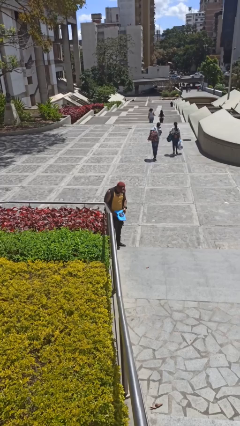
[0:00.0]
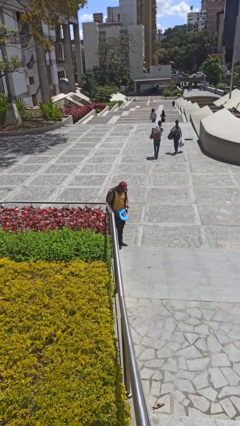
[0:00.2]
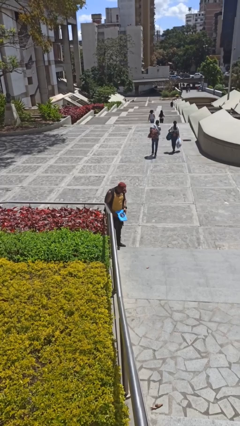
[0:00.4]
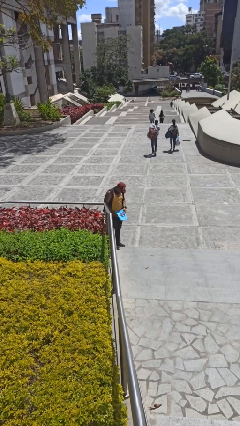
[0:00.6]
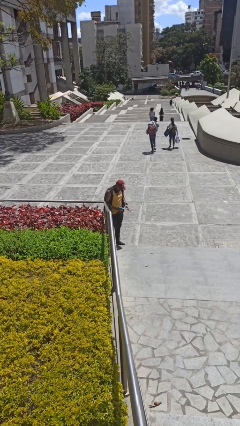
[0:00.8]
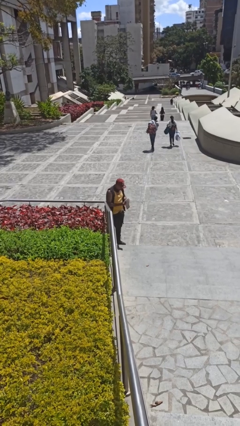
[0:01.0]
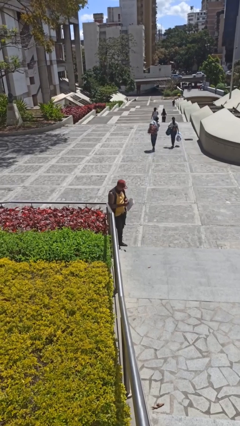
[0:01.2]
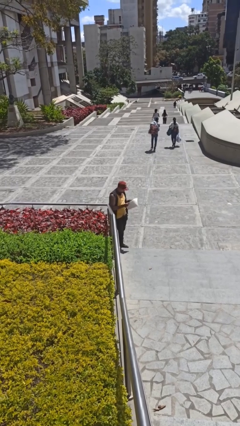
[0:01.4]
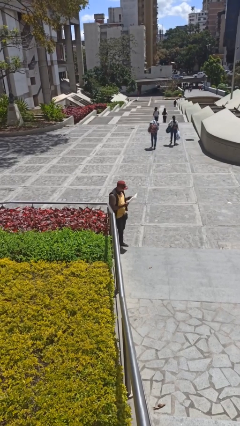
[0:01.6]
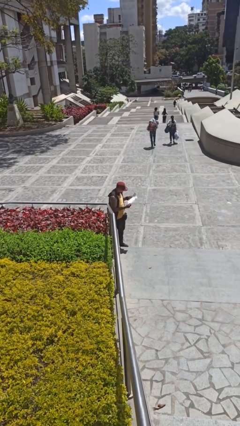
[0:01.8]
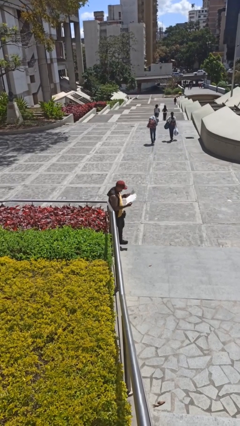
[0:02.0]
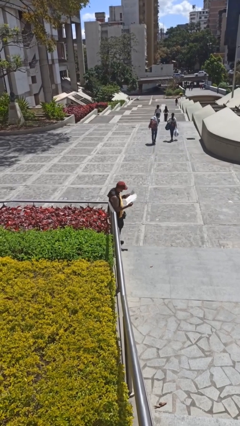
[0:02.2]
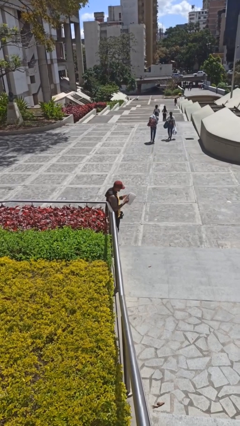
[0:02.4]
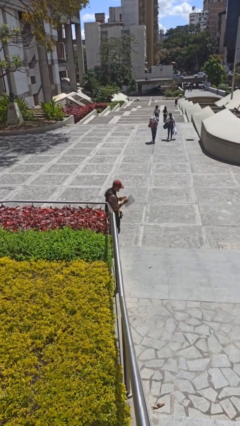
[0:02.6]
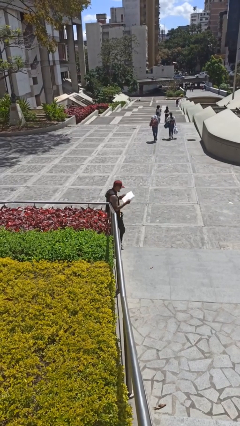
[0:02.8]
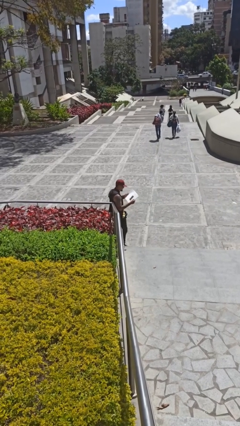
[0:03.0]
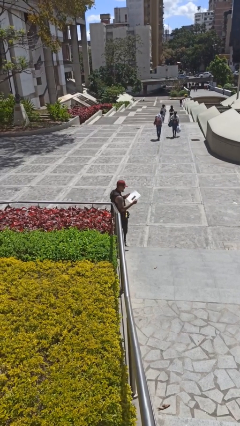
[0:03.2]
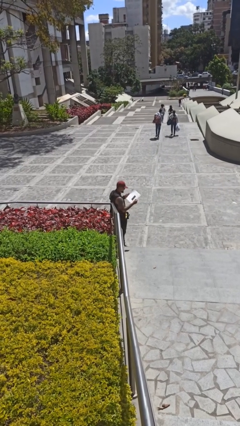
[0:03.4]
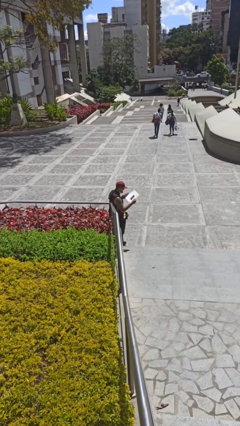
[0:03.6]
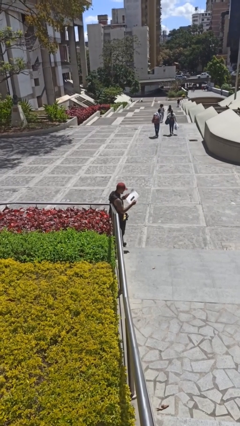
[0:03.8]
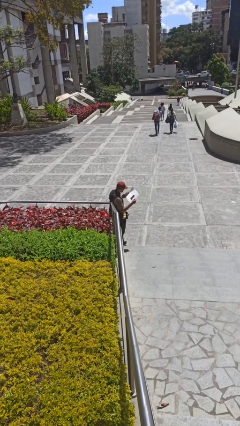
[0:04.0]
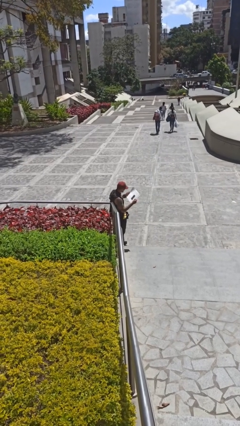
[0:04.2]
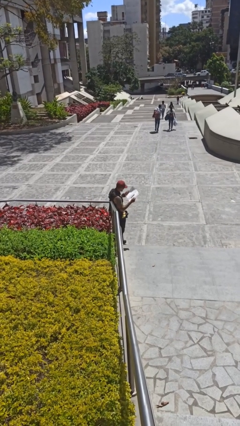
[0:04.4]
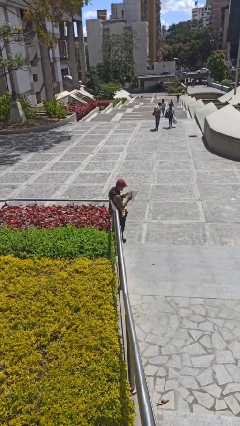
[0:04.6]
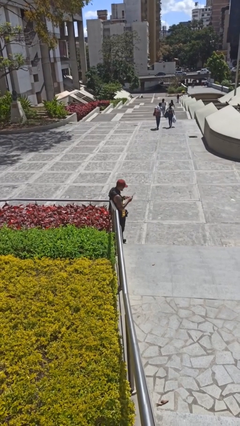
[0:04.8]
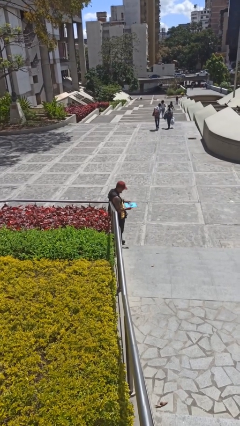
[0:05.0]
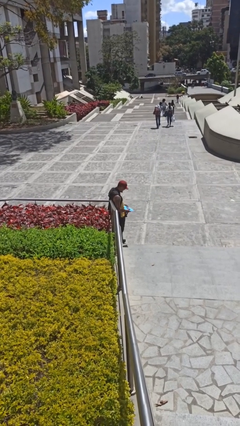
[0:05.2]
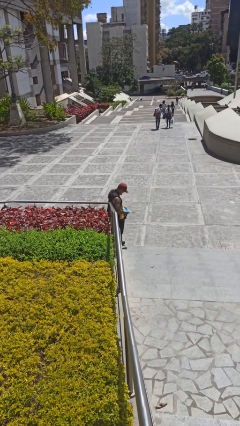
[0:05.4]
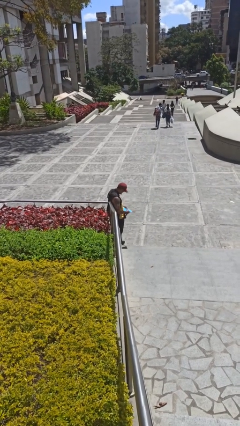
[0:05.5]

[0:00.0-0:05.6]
person reads document

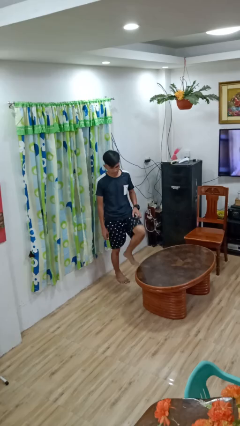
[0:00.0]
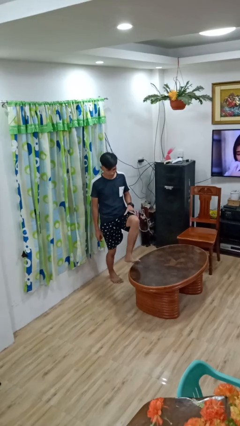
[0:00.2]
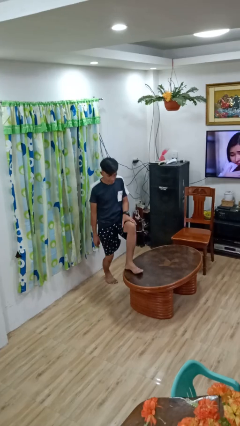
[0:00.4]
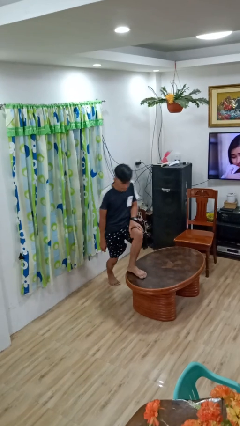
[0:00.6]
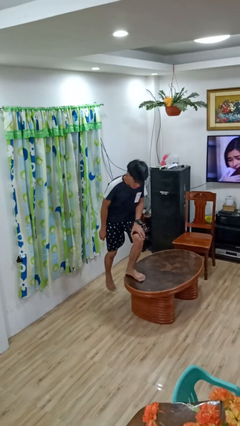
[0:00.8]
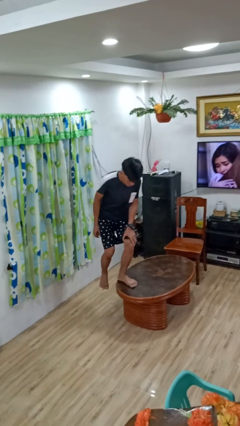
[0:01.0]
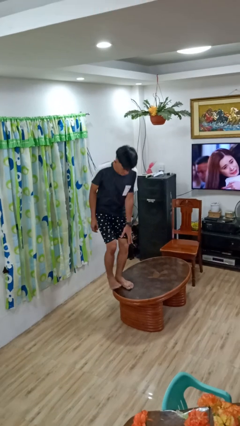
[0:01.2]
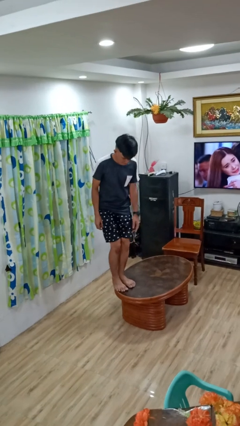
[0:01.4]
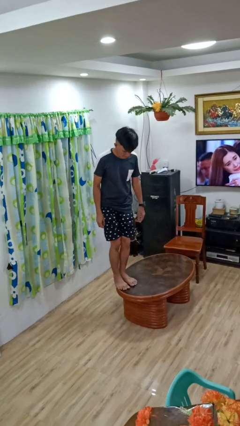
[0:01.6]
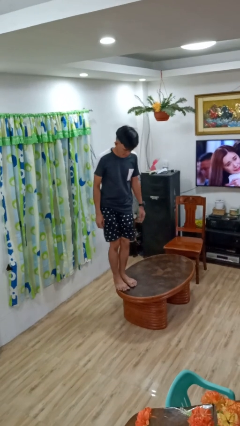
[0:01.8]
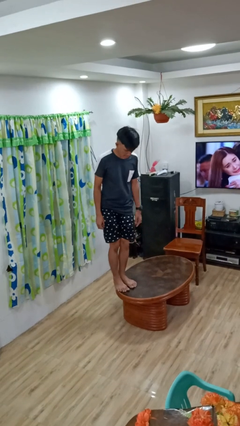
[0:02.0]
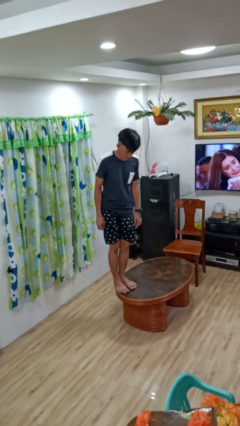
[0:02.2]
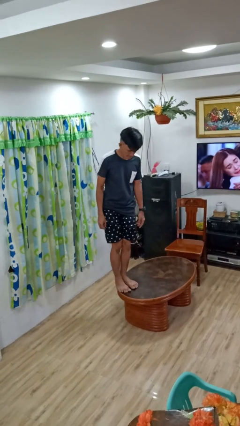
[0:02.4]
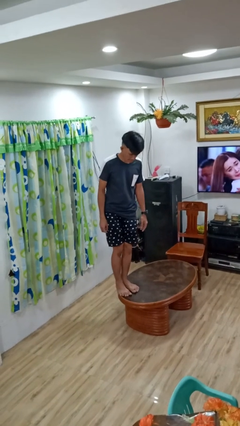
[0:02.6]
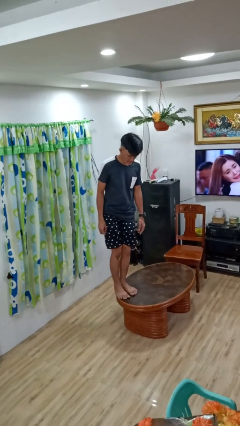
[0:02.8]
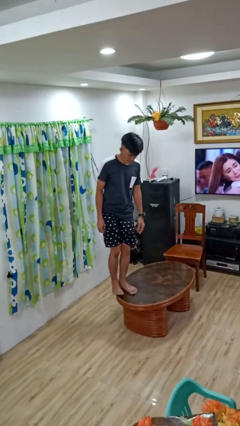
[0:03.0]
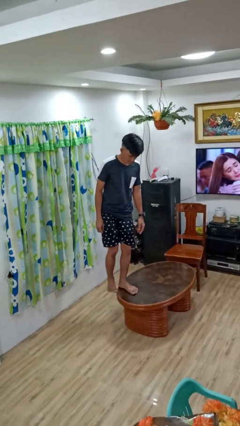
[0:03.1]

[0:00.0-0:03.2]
person climbs on table

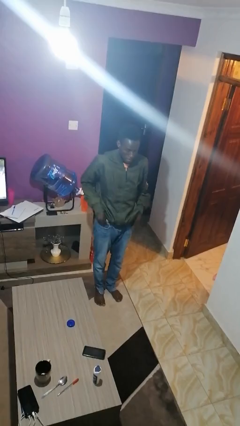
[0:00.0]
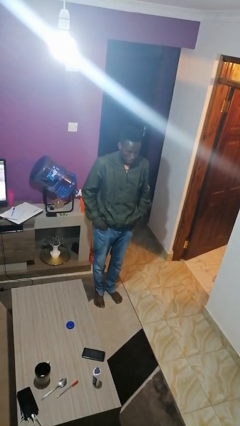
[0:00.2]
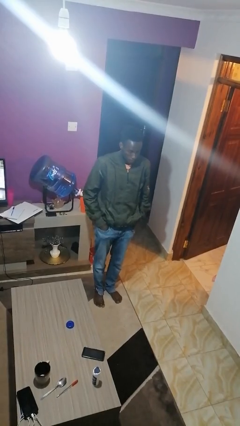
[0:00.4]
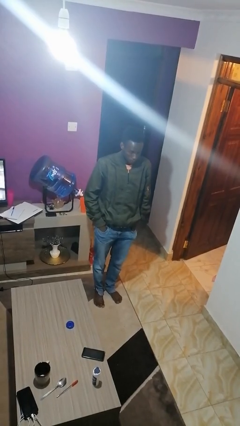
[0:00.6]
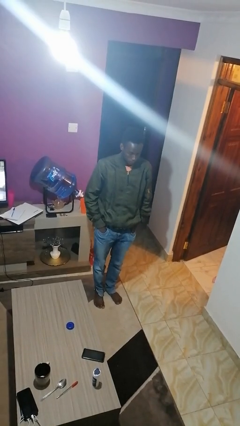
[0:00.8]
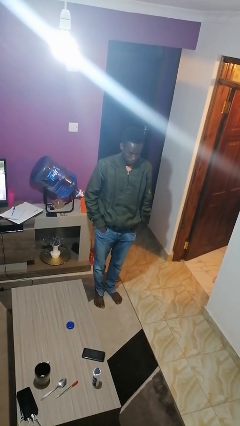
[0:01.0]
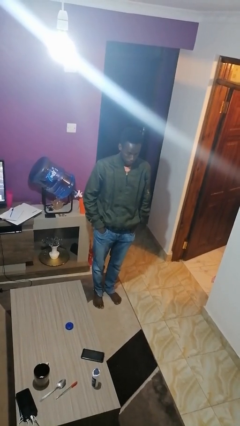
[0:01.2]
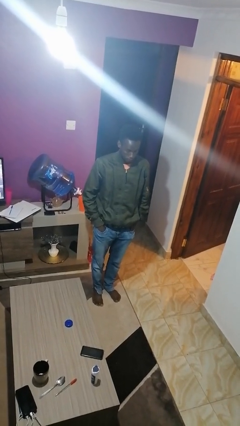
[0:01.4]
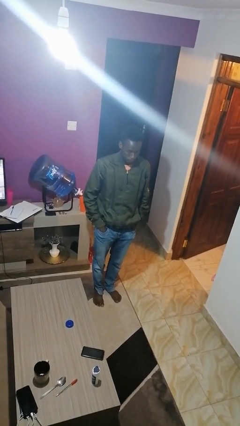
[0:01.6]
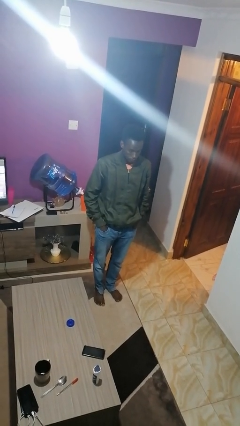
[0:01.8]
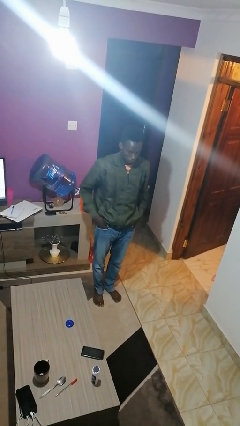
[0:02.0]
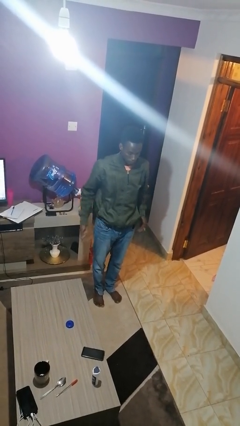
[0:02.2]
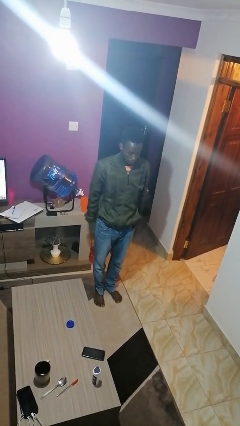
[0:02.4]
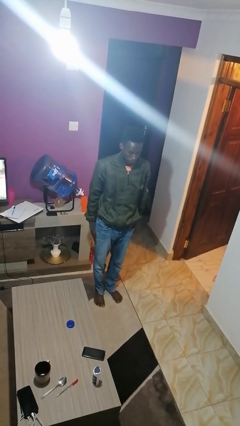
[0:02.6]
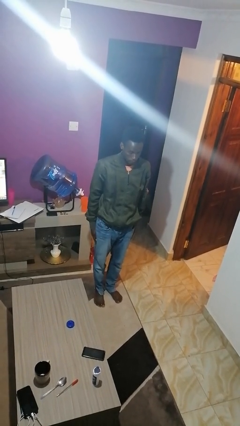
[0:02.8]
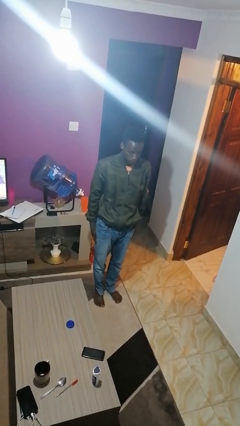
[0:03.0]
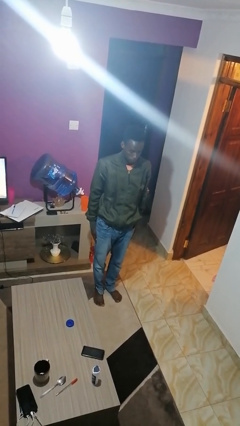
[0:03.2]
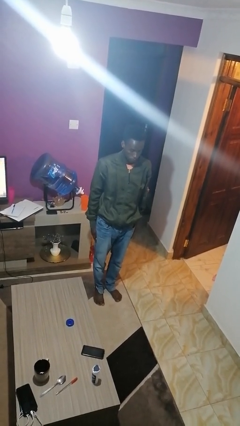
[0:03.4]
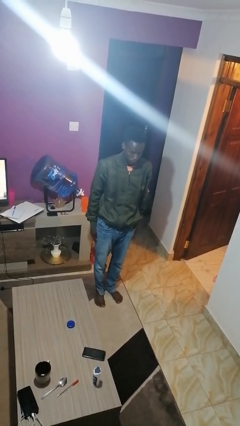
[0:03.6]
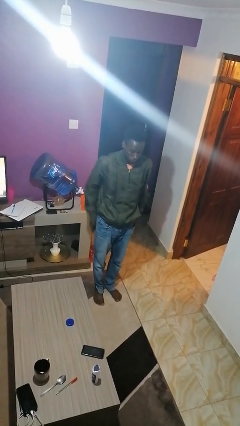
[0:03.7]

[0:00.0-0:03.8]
person puts hands in back pockets

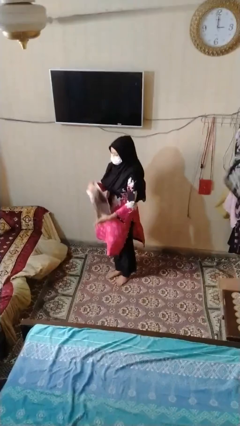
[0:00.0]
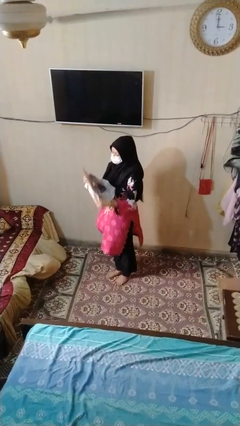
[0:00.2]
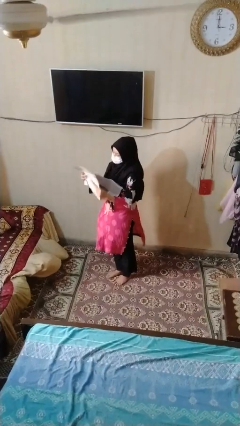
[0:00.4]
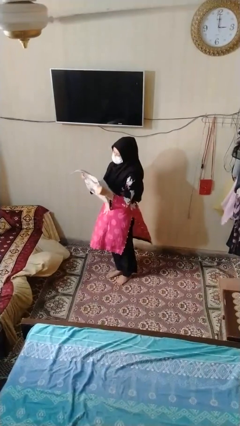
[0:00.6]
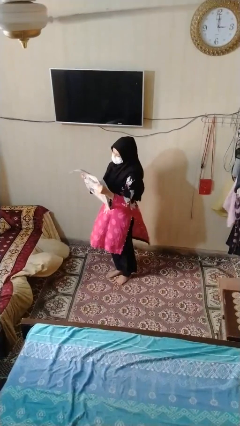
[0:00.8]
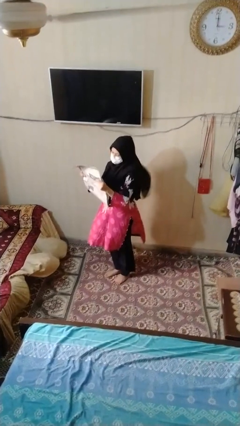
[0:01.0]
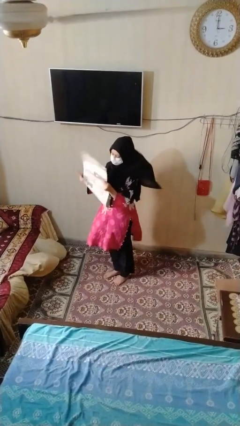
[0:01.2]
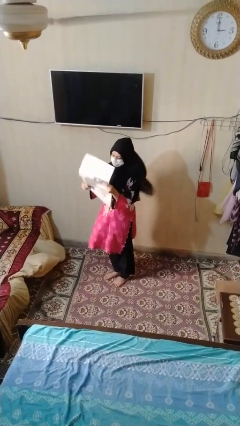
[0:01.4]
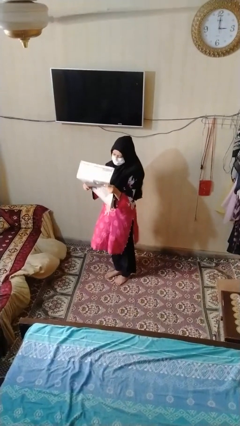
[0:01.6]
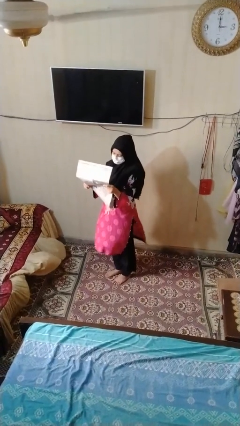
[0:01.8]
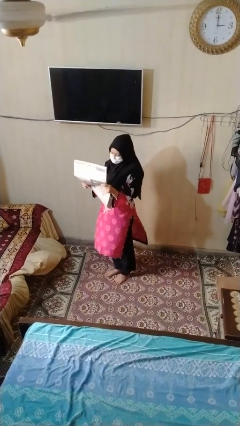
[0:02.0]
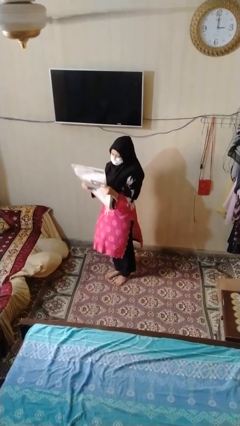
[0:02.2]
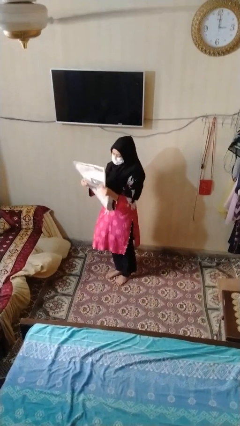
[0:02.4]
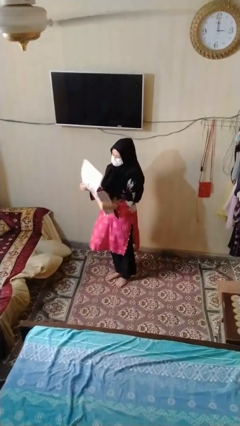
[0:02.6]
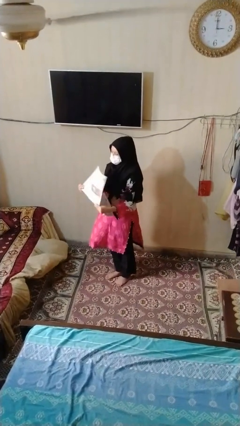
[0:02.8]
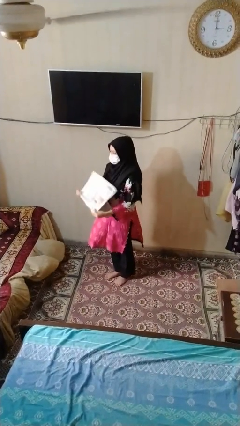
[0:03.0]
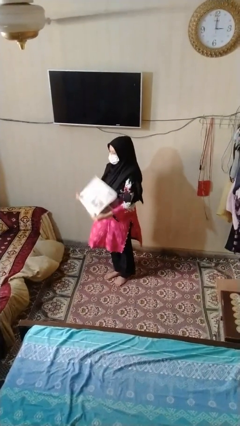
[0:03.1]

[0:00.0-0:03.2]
person reads newspaper

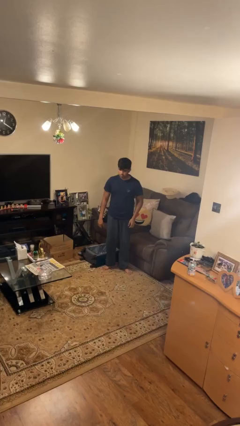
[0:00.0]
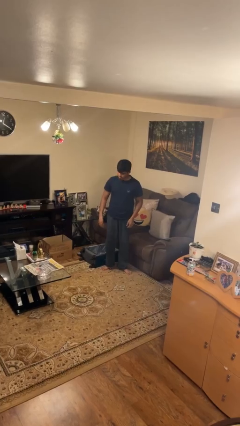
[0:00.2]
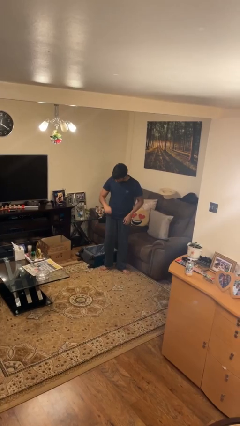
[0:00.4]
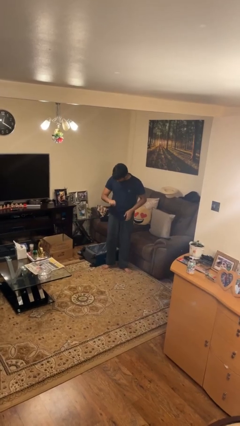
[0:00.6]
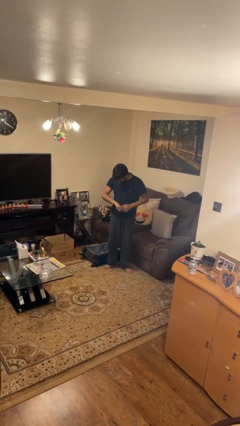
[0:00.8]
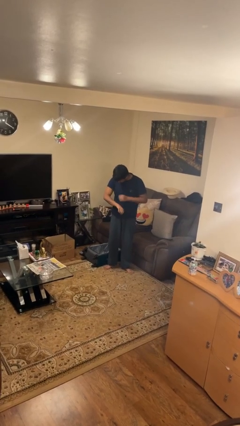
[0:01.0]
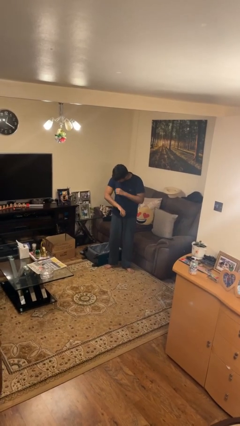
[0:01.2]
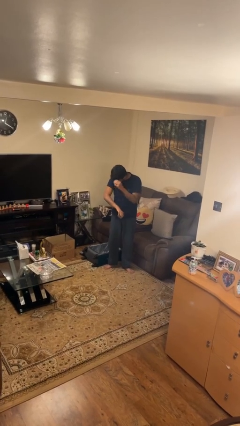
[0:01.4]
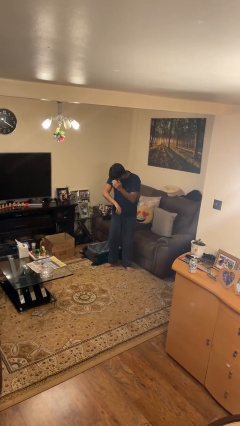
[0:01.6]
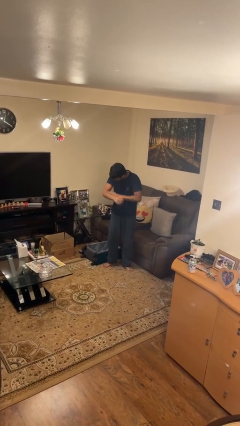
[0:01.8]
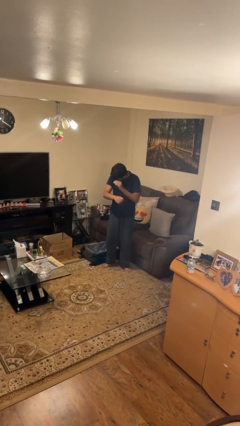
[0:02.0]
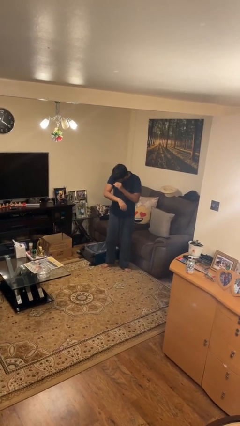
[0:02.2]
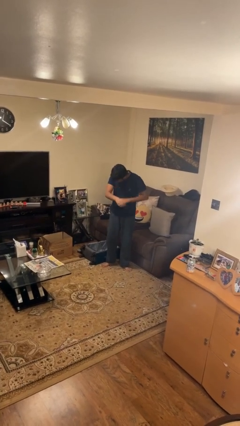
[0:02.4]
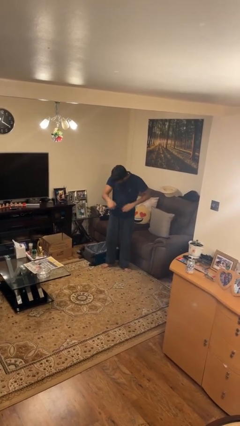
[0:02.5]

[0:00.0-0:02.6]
person swats bug
